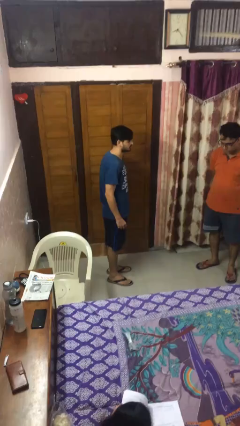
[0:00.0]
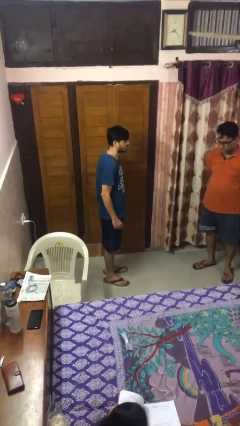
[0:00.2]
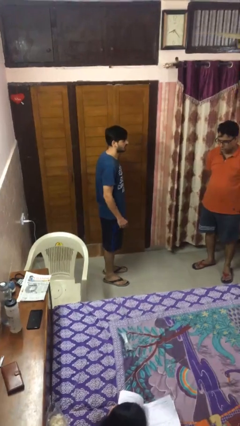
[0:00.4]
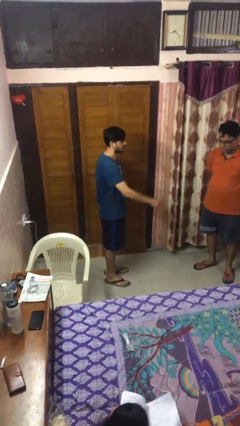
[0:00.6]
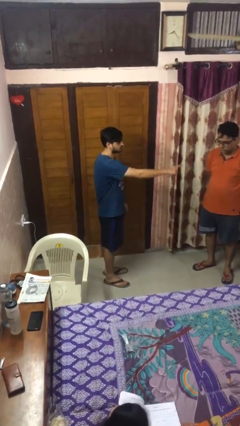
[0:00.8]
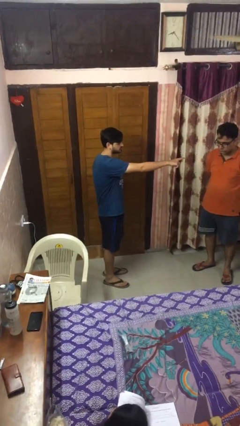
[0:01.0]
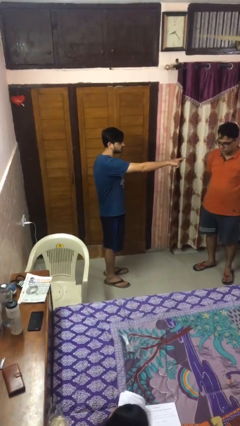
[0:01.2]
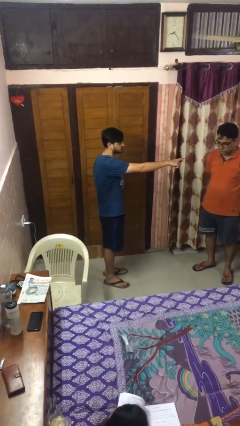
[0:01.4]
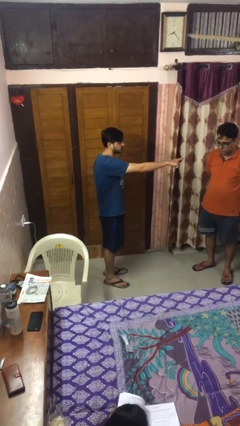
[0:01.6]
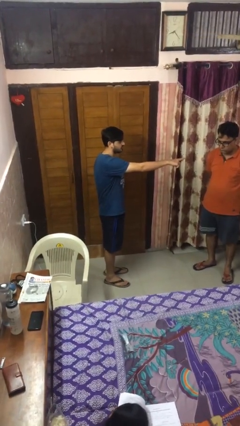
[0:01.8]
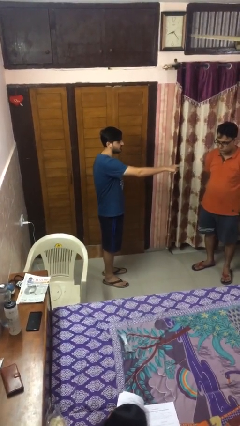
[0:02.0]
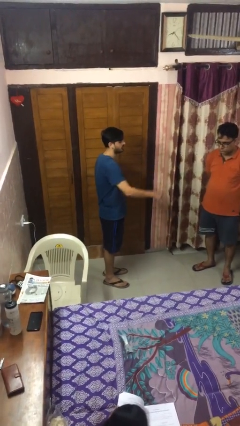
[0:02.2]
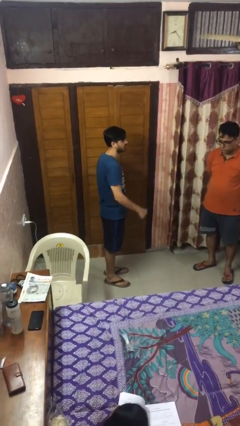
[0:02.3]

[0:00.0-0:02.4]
person points at person

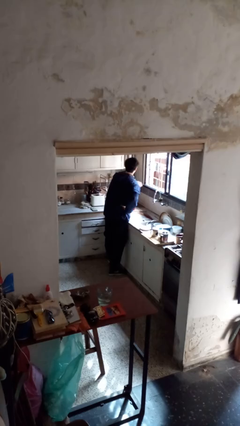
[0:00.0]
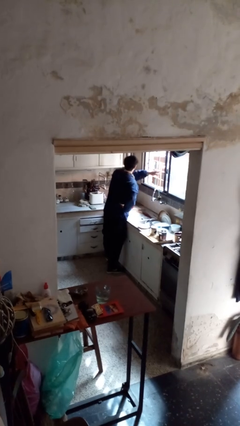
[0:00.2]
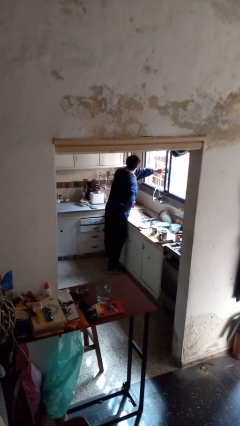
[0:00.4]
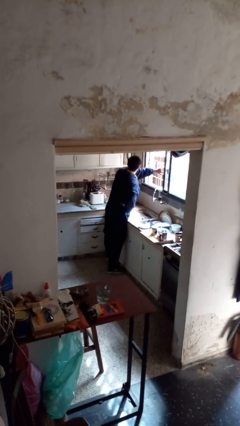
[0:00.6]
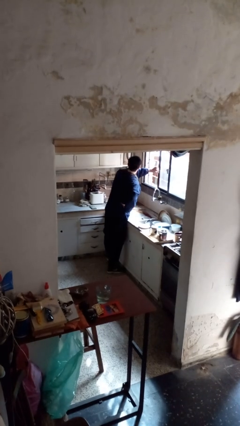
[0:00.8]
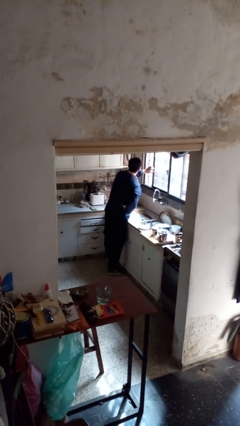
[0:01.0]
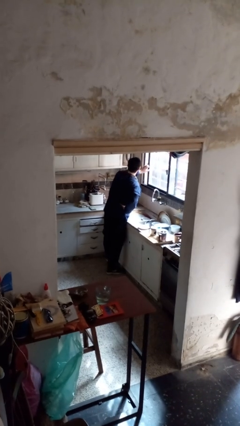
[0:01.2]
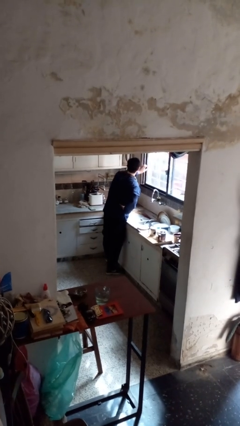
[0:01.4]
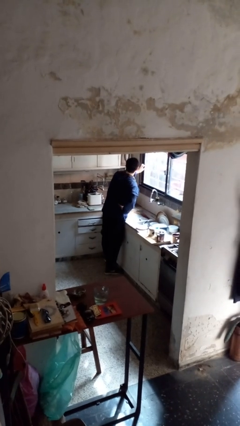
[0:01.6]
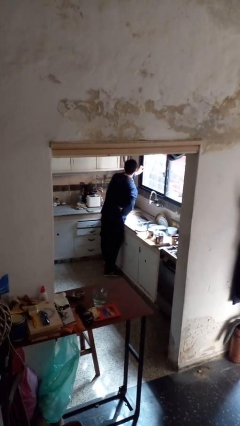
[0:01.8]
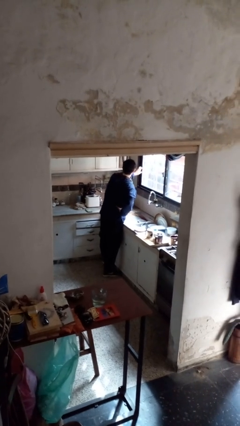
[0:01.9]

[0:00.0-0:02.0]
person closes home window

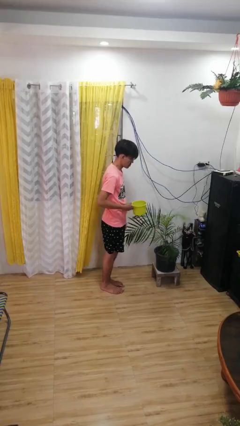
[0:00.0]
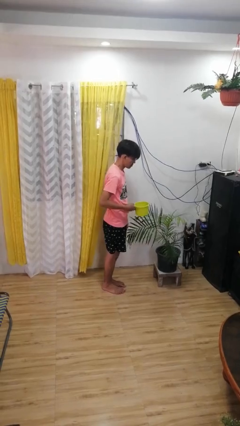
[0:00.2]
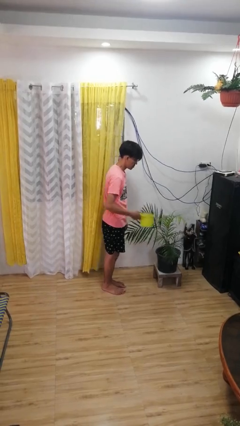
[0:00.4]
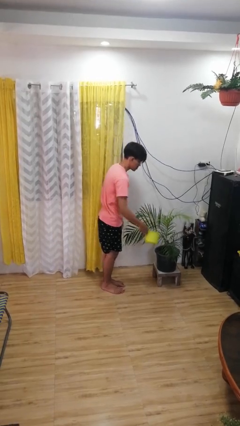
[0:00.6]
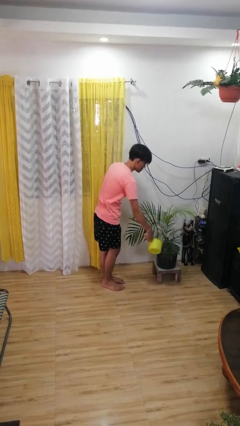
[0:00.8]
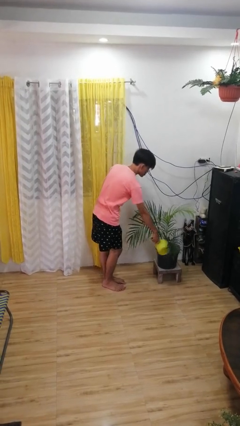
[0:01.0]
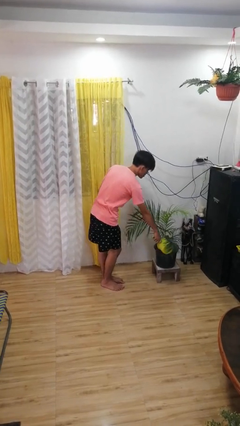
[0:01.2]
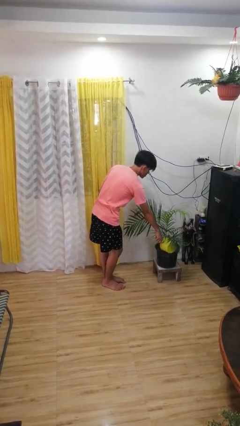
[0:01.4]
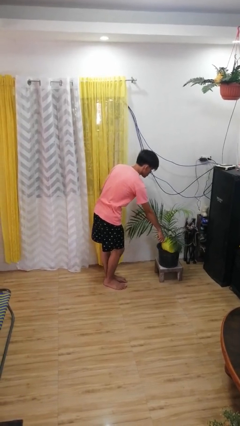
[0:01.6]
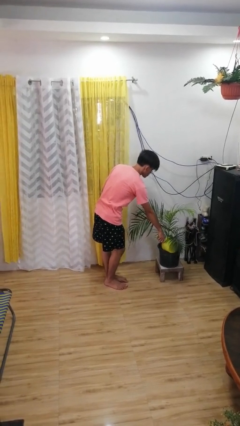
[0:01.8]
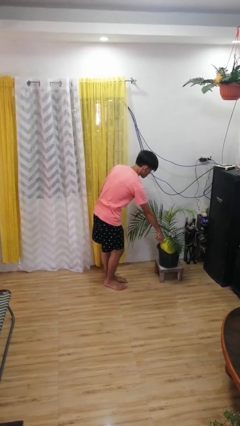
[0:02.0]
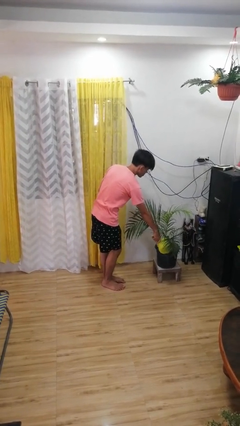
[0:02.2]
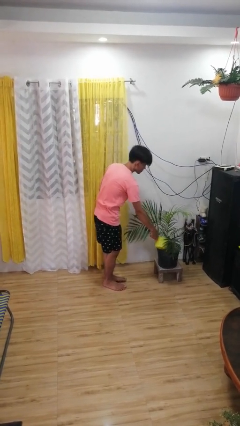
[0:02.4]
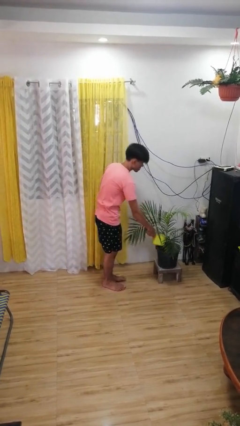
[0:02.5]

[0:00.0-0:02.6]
person waters houseplant

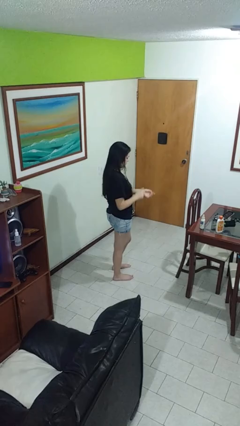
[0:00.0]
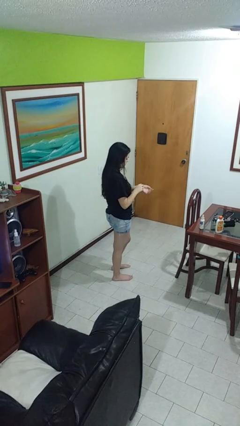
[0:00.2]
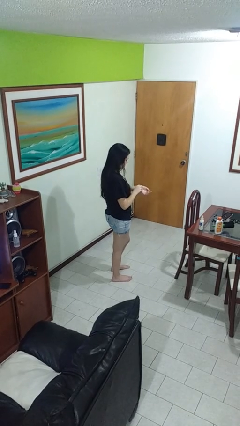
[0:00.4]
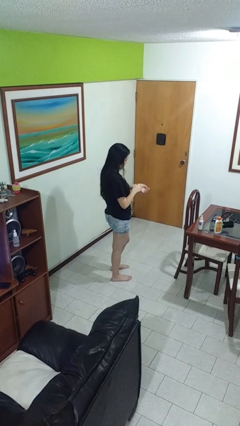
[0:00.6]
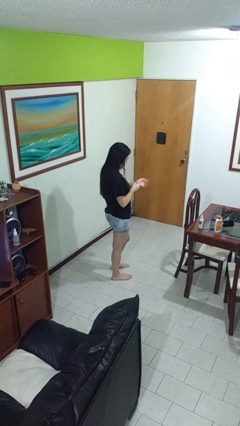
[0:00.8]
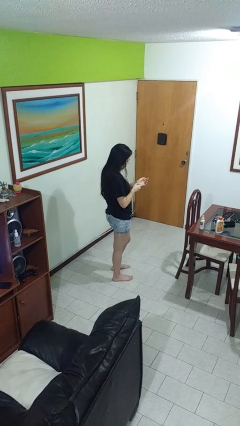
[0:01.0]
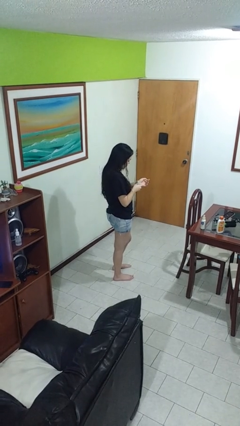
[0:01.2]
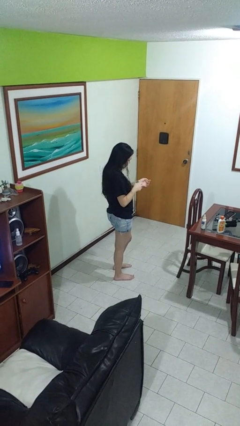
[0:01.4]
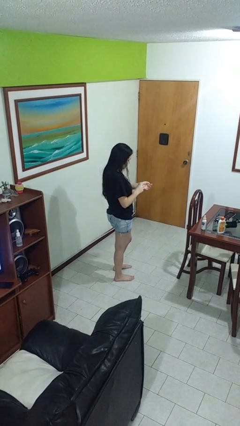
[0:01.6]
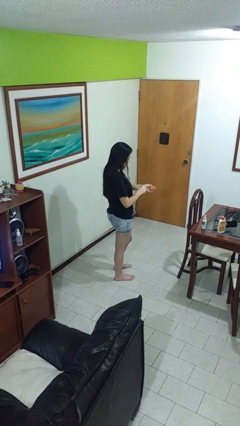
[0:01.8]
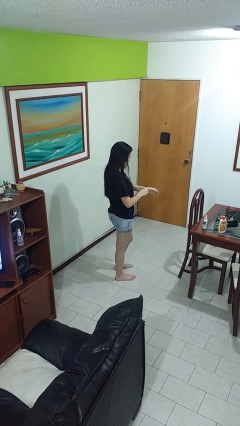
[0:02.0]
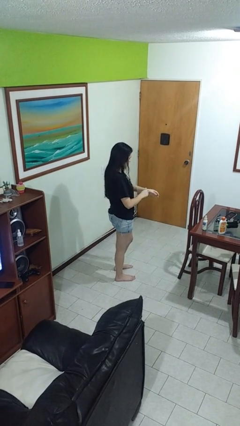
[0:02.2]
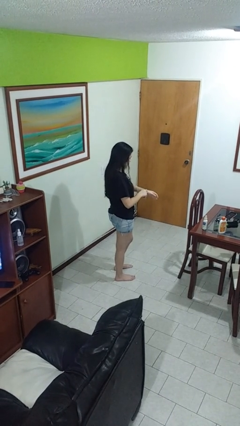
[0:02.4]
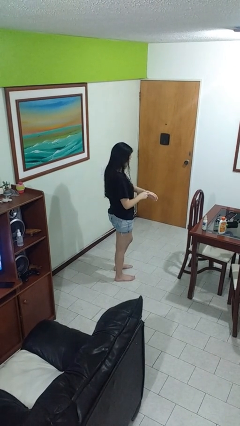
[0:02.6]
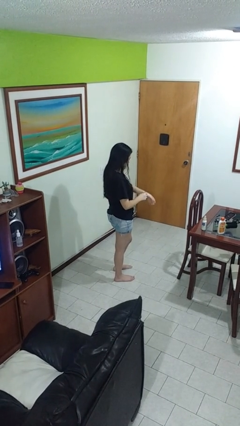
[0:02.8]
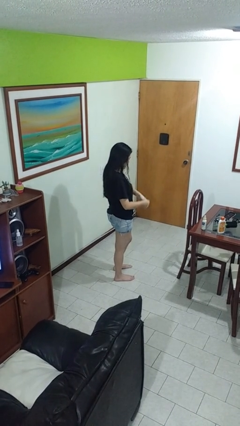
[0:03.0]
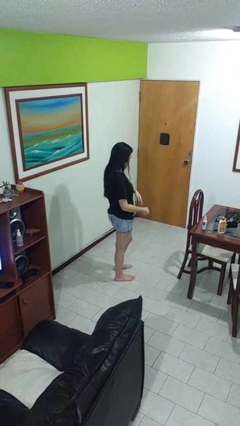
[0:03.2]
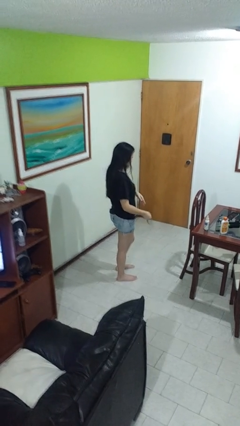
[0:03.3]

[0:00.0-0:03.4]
person takes off wristwatch

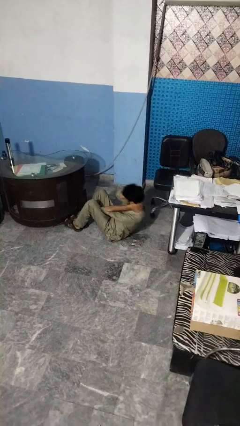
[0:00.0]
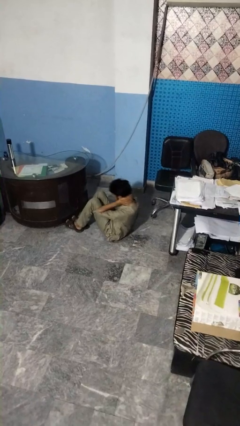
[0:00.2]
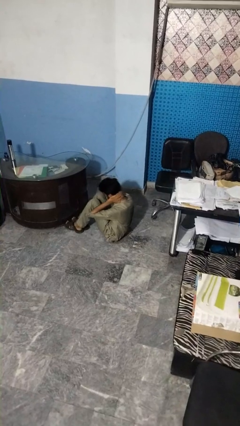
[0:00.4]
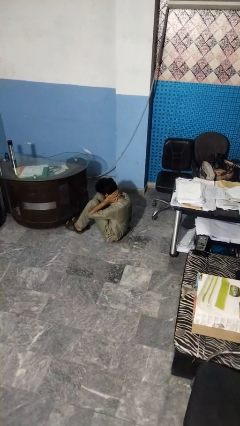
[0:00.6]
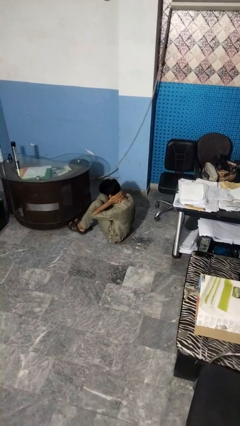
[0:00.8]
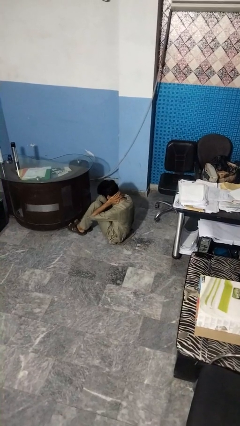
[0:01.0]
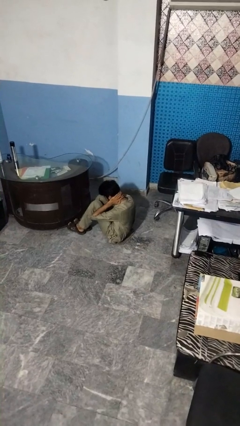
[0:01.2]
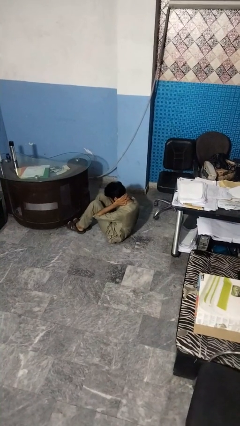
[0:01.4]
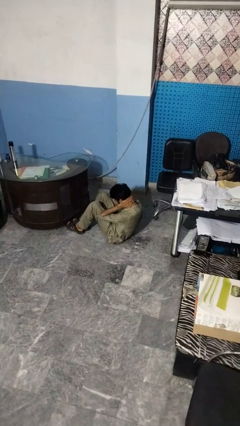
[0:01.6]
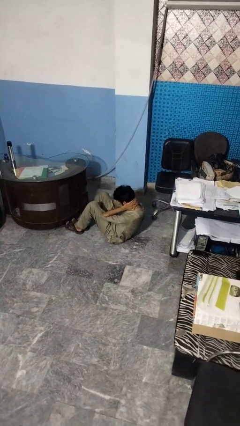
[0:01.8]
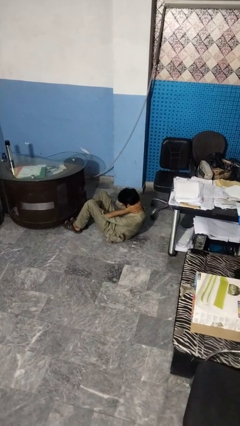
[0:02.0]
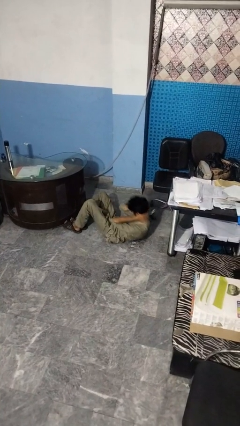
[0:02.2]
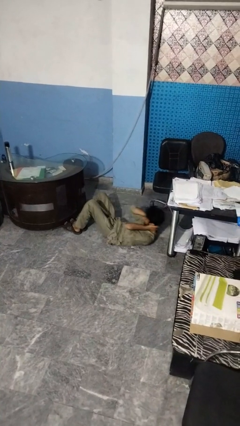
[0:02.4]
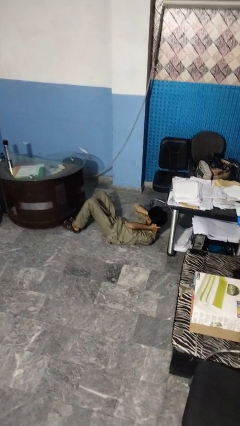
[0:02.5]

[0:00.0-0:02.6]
person exercises with situp

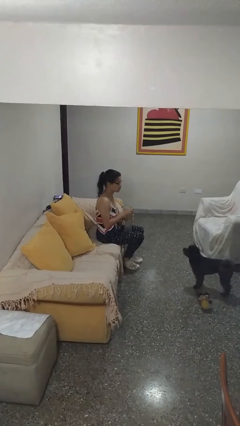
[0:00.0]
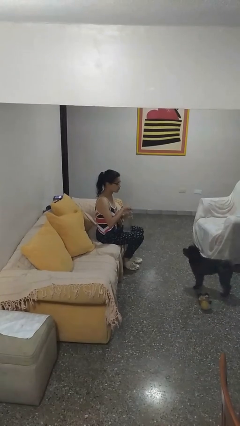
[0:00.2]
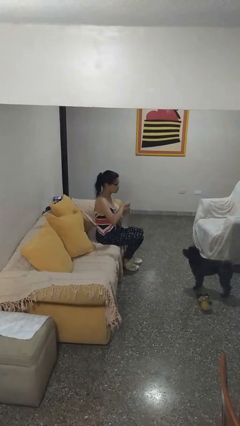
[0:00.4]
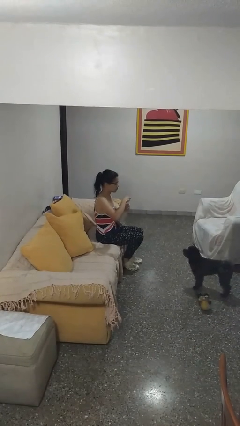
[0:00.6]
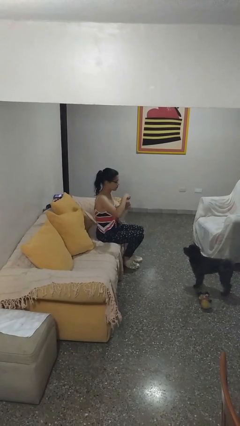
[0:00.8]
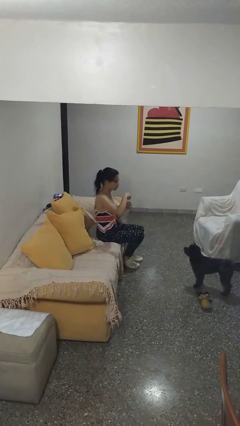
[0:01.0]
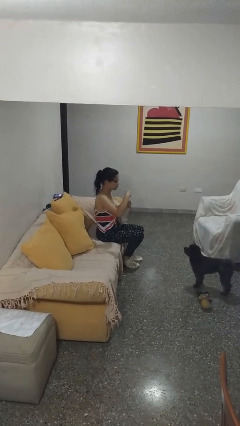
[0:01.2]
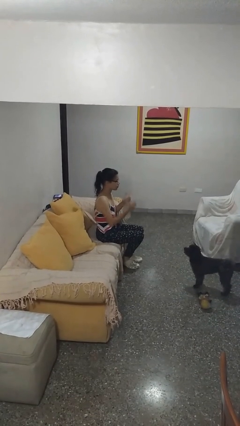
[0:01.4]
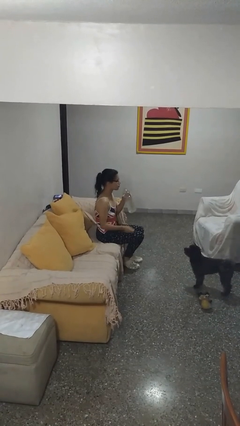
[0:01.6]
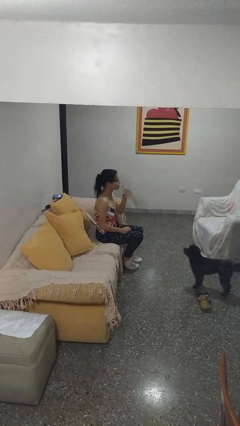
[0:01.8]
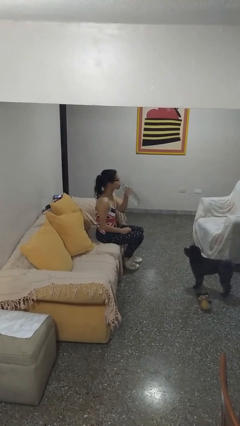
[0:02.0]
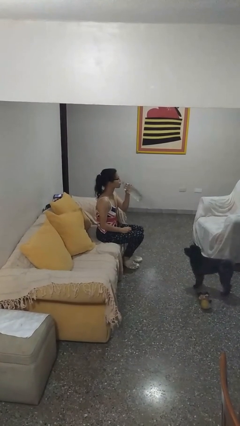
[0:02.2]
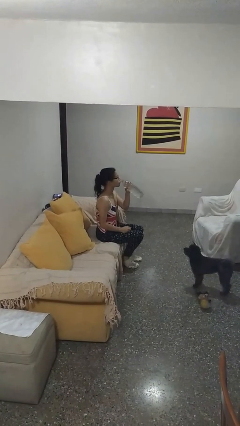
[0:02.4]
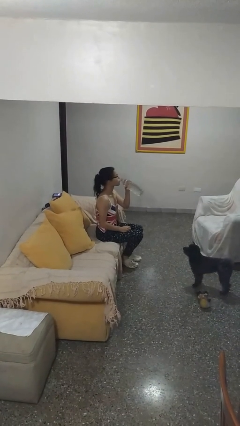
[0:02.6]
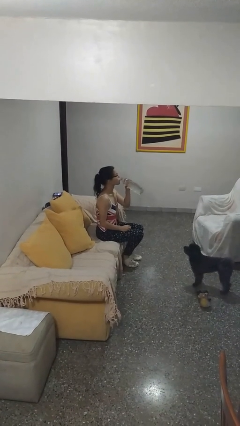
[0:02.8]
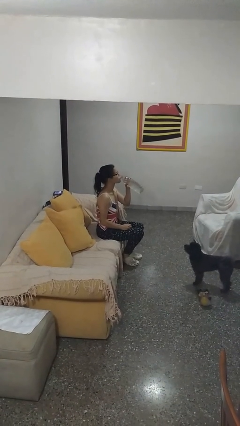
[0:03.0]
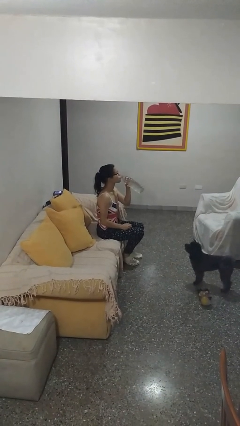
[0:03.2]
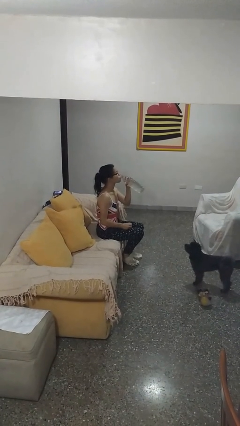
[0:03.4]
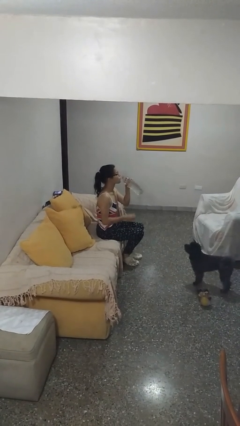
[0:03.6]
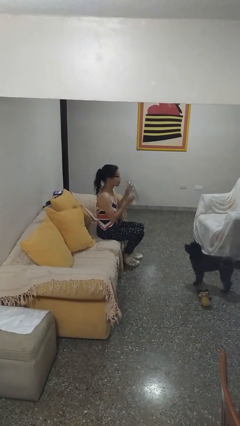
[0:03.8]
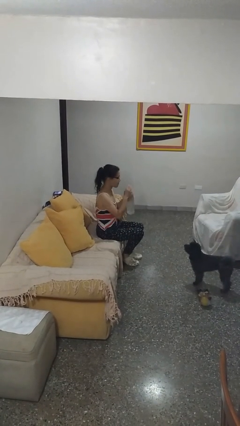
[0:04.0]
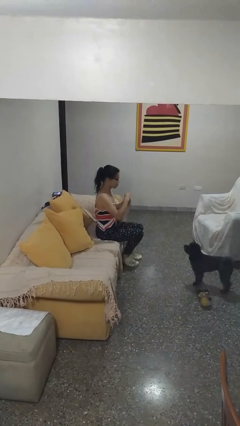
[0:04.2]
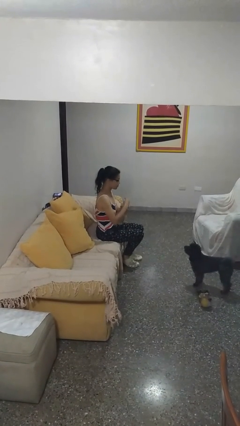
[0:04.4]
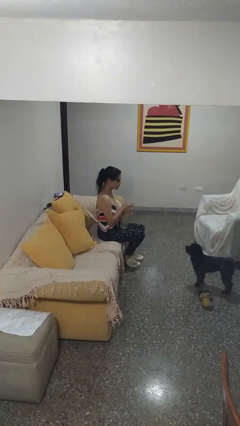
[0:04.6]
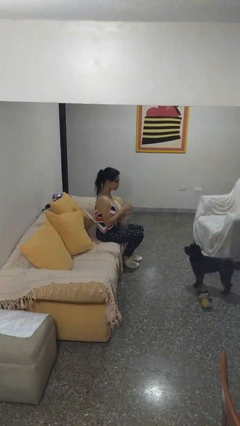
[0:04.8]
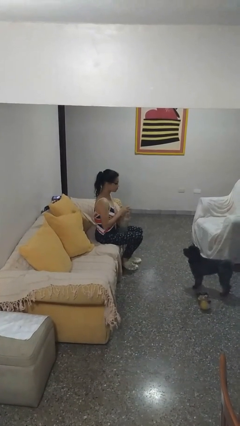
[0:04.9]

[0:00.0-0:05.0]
person drinks from bottle
